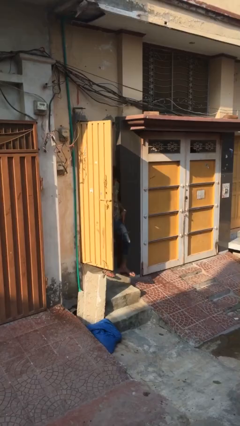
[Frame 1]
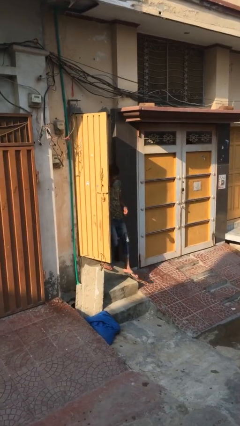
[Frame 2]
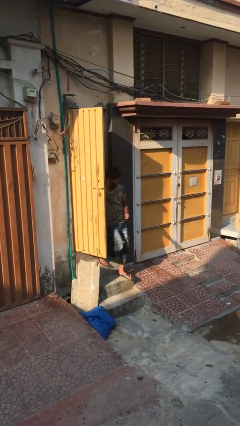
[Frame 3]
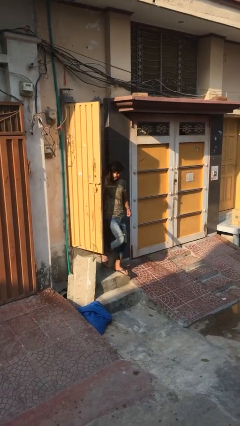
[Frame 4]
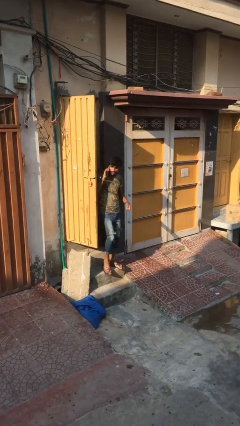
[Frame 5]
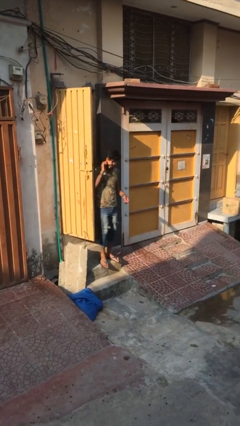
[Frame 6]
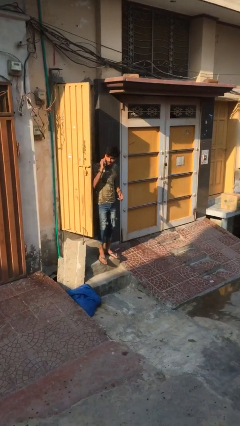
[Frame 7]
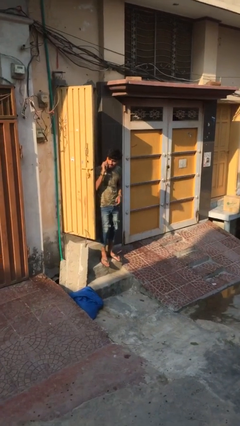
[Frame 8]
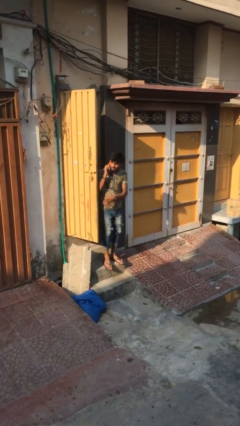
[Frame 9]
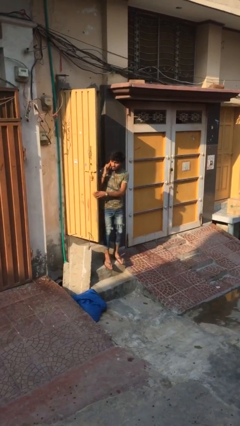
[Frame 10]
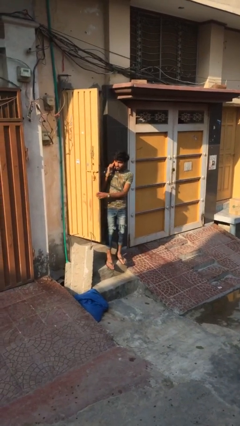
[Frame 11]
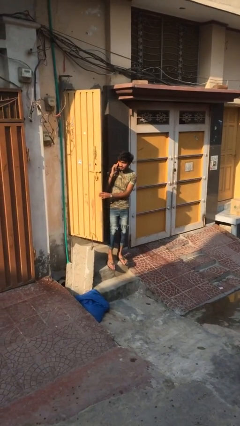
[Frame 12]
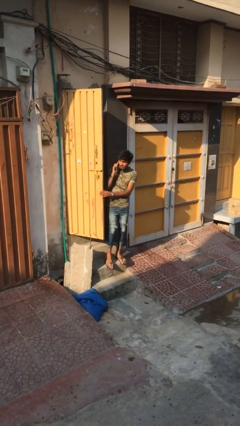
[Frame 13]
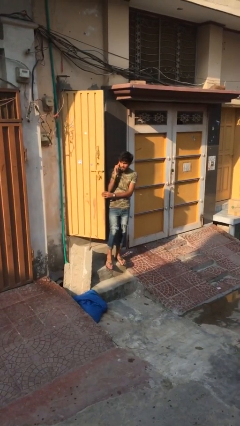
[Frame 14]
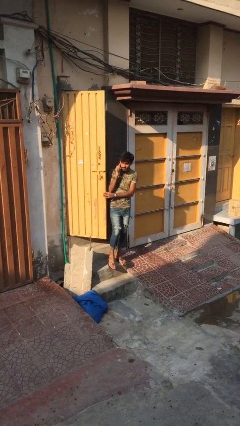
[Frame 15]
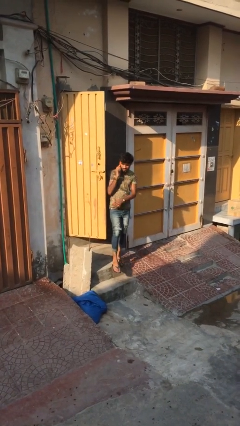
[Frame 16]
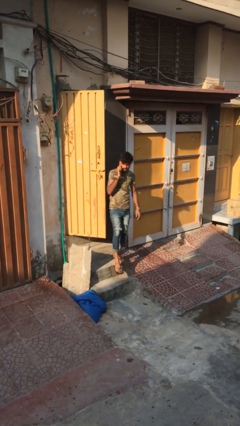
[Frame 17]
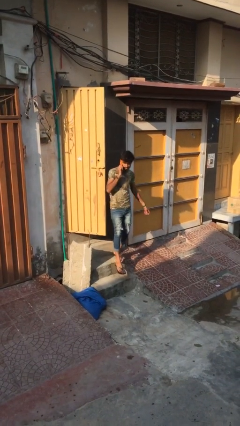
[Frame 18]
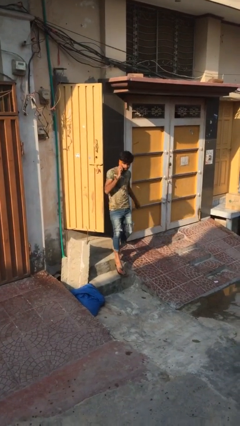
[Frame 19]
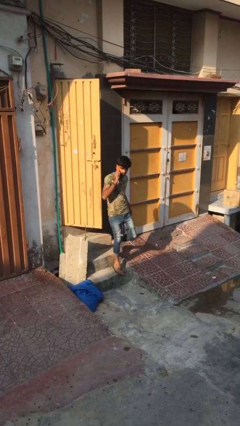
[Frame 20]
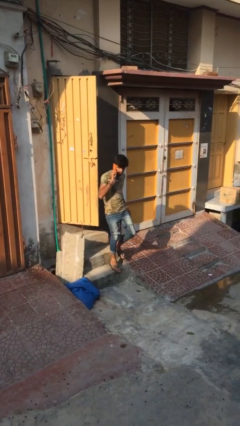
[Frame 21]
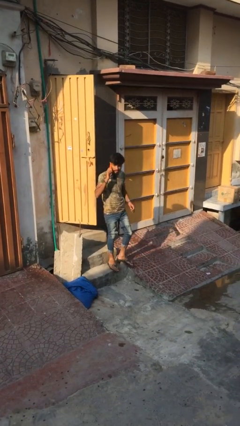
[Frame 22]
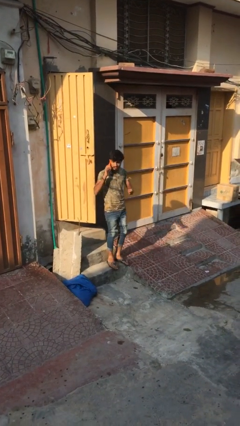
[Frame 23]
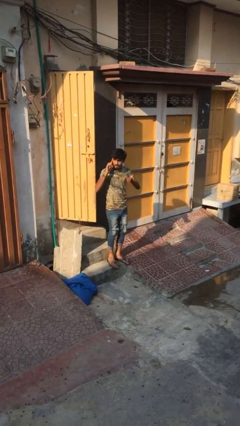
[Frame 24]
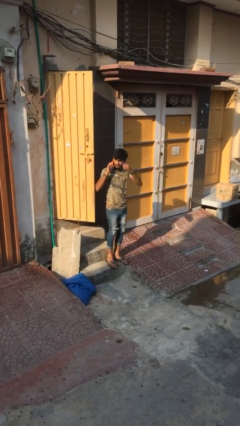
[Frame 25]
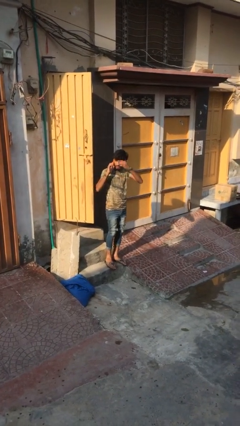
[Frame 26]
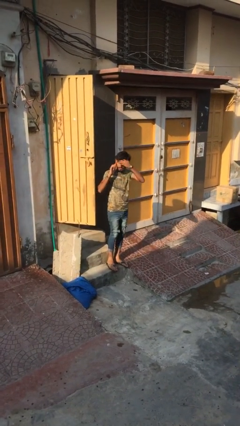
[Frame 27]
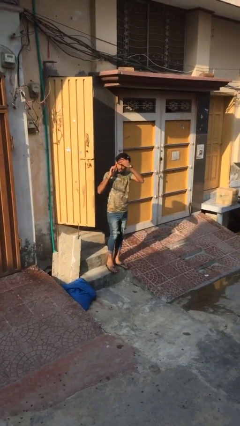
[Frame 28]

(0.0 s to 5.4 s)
person enters scene through structure

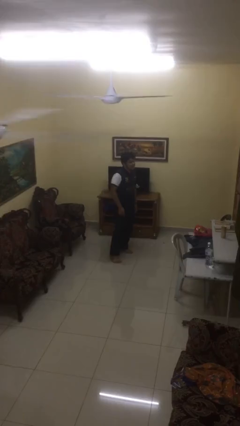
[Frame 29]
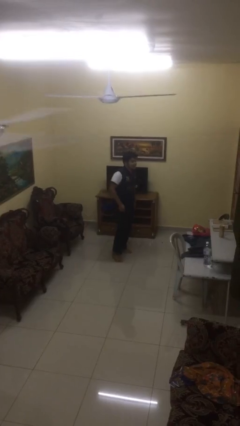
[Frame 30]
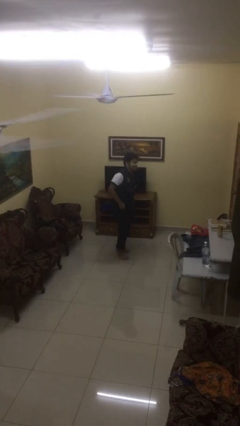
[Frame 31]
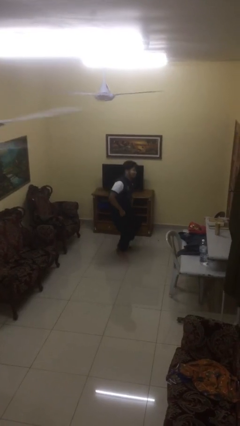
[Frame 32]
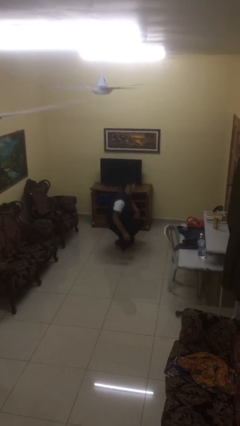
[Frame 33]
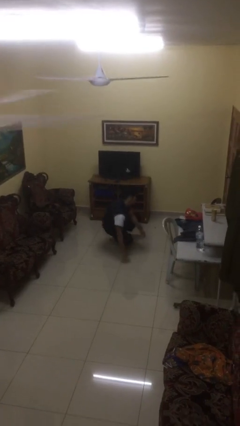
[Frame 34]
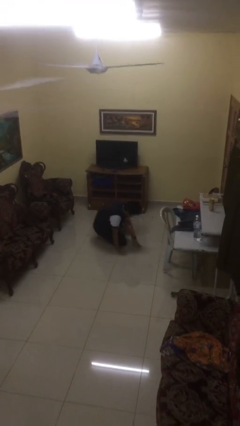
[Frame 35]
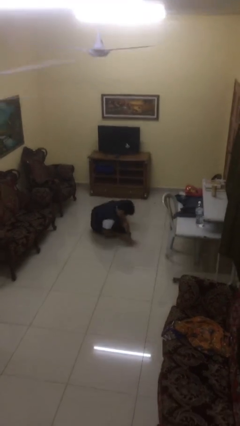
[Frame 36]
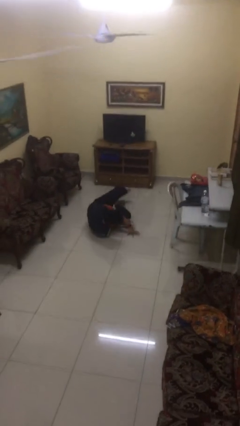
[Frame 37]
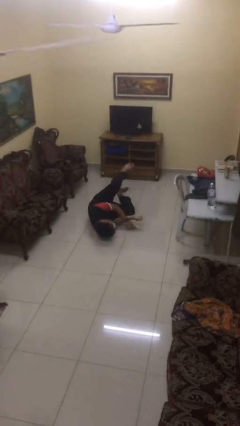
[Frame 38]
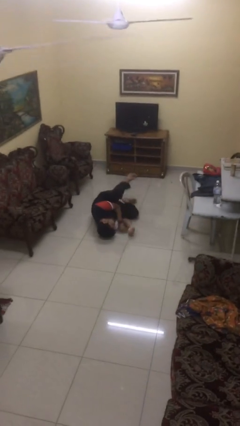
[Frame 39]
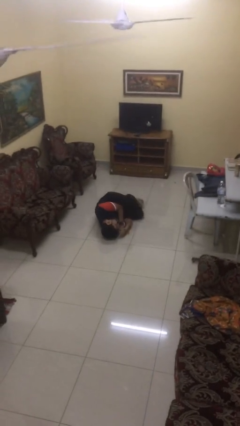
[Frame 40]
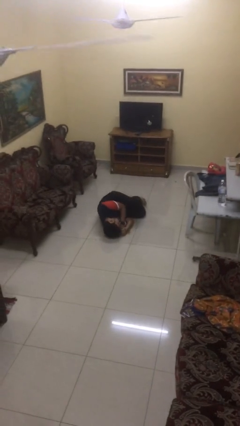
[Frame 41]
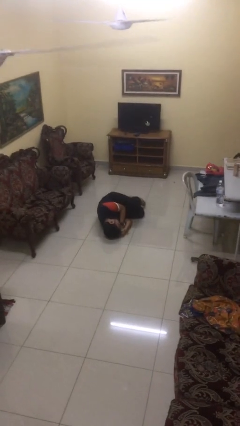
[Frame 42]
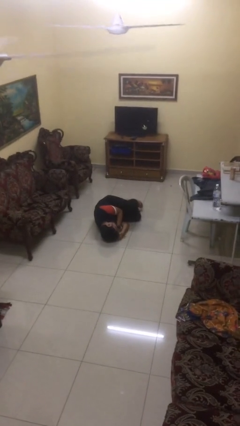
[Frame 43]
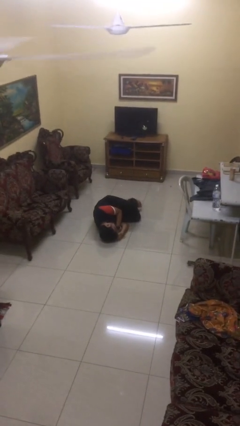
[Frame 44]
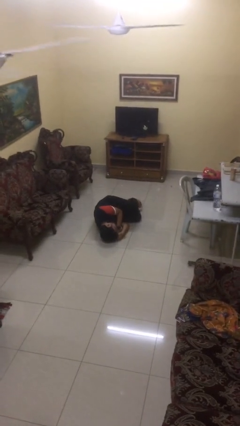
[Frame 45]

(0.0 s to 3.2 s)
person falls while standing

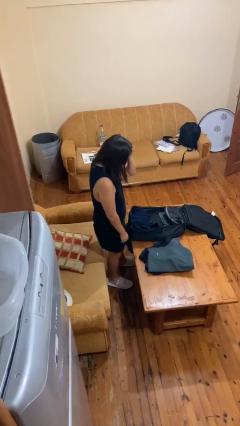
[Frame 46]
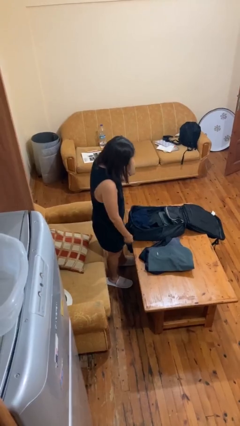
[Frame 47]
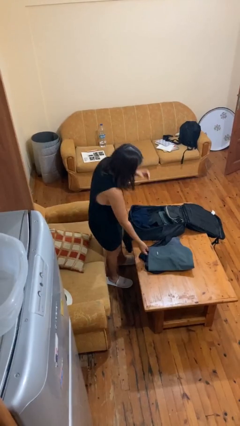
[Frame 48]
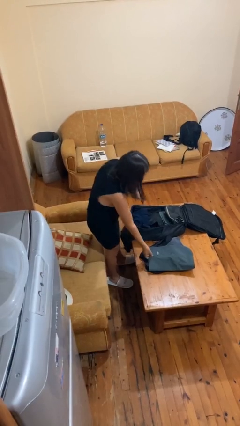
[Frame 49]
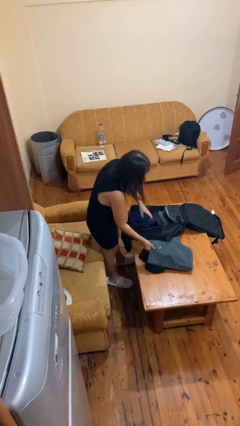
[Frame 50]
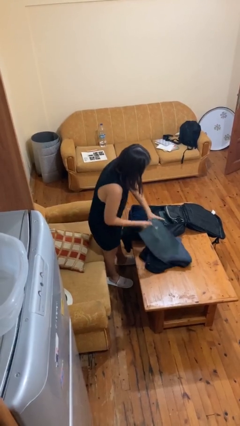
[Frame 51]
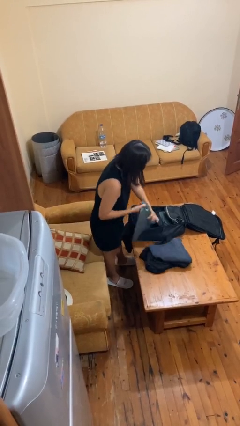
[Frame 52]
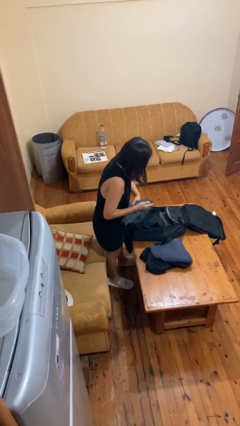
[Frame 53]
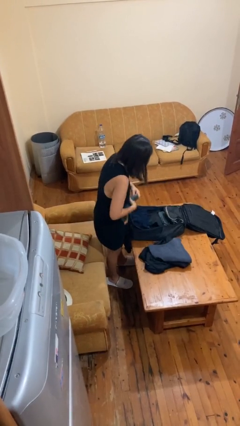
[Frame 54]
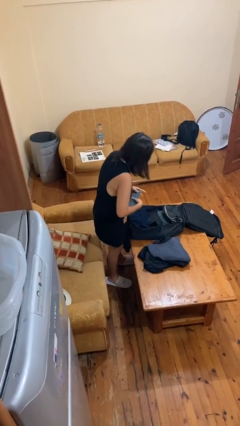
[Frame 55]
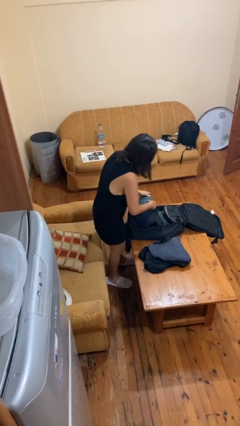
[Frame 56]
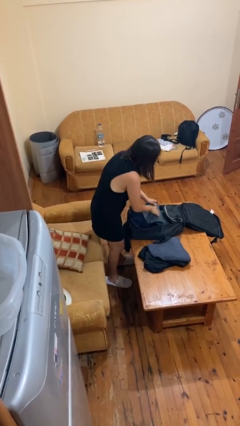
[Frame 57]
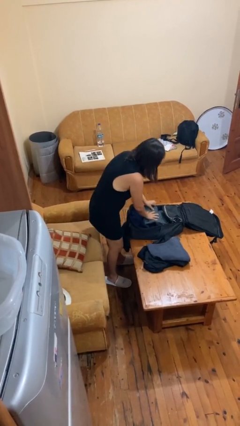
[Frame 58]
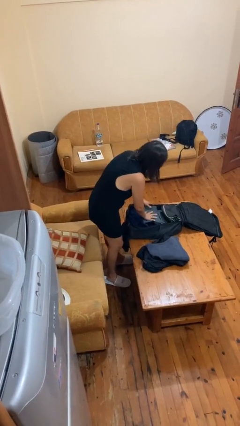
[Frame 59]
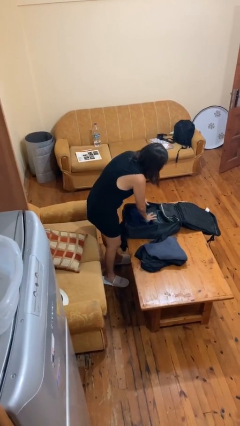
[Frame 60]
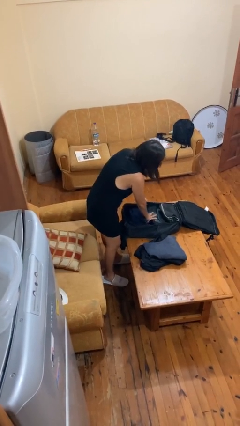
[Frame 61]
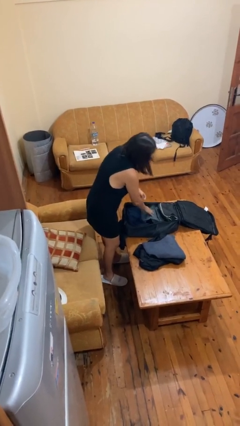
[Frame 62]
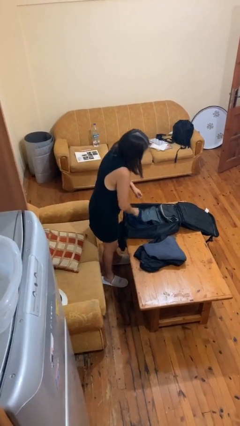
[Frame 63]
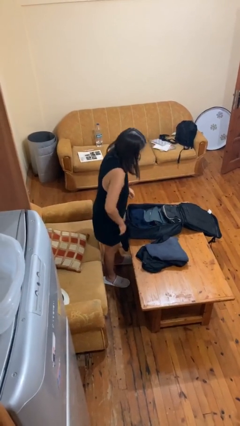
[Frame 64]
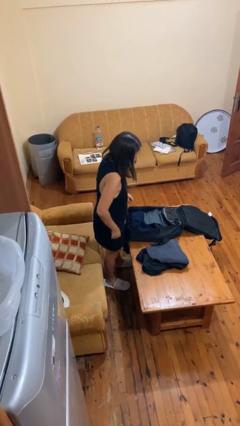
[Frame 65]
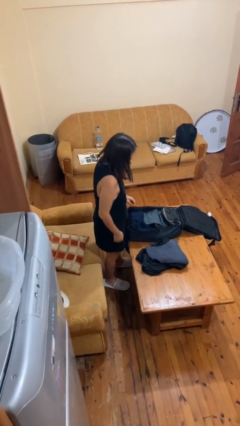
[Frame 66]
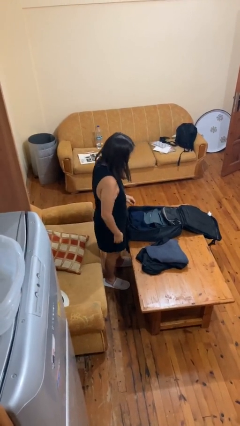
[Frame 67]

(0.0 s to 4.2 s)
person loads clothes into suitcase

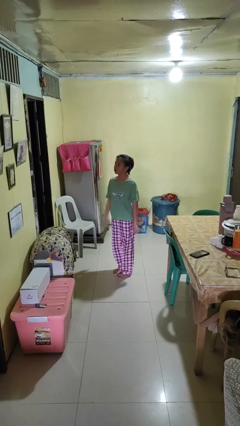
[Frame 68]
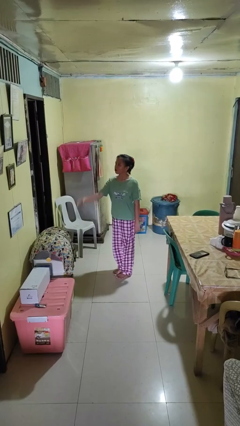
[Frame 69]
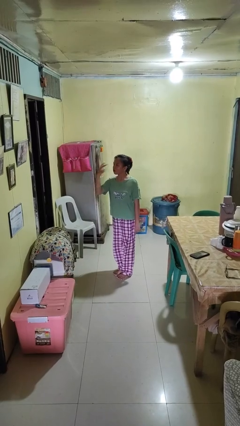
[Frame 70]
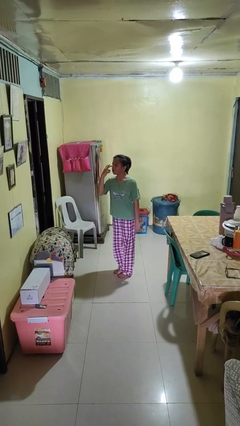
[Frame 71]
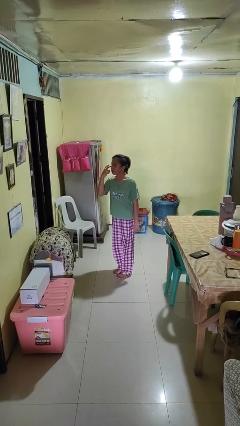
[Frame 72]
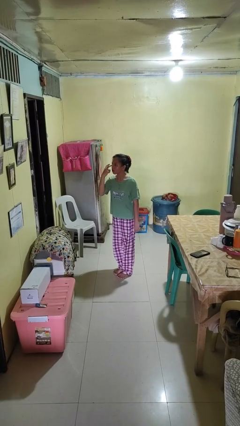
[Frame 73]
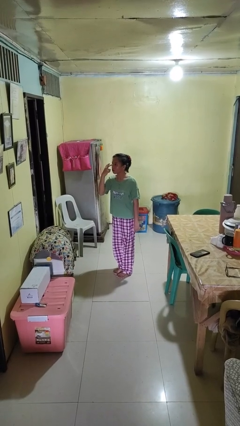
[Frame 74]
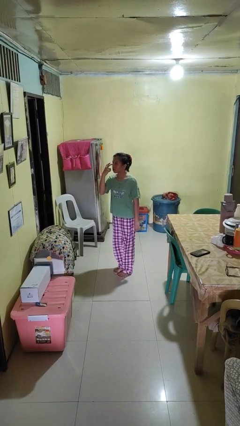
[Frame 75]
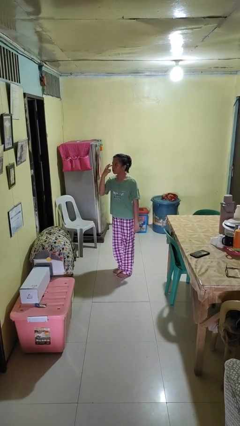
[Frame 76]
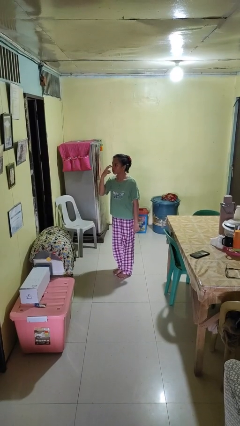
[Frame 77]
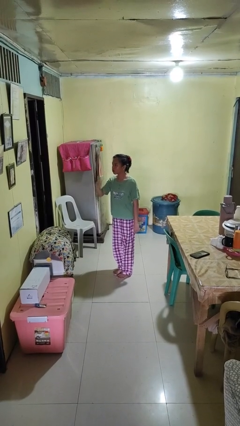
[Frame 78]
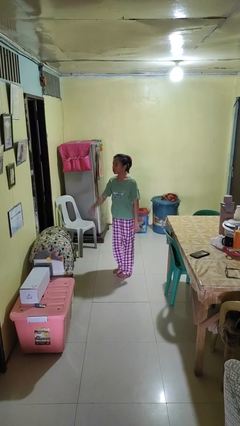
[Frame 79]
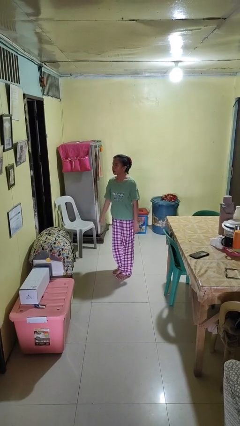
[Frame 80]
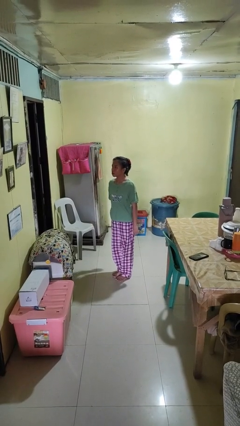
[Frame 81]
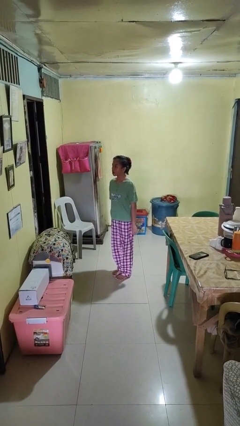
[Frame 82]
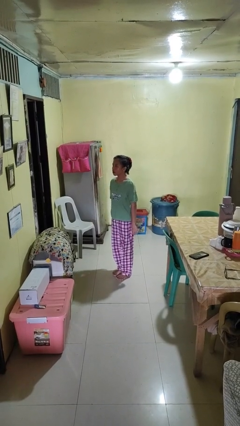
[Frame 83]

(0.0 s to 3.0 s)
person gestures watch closely

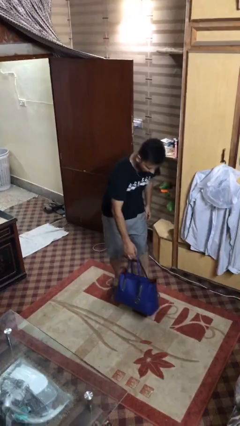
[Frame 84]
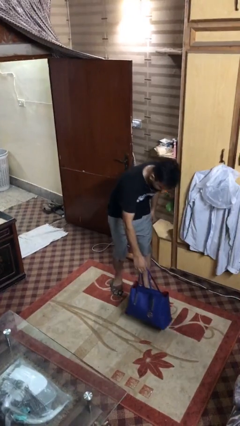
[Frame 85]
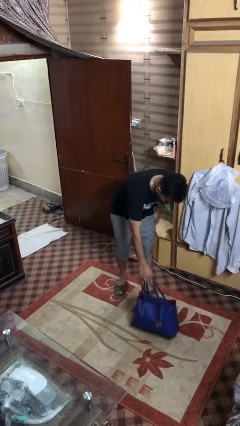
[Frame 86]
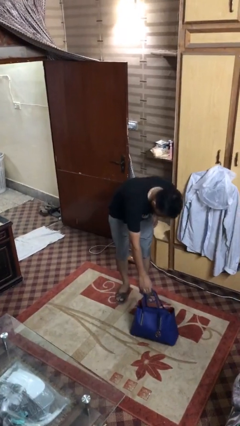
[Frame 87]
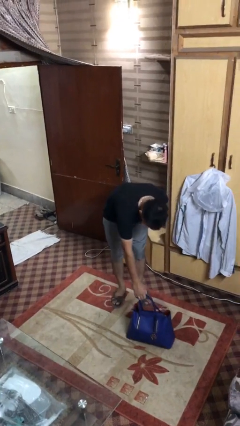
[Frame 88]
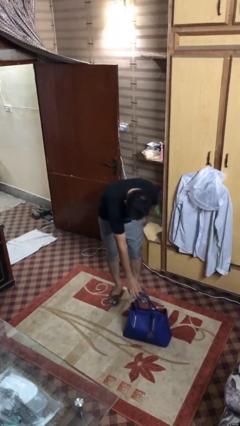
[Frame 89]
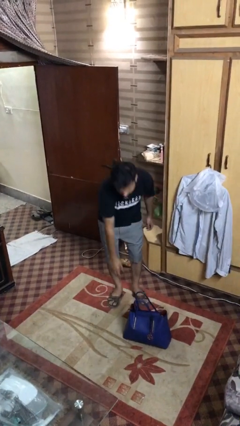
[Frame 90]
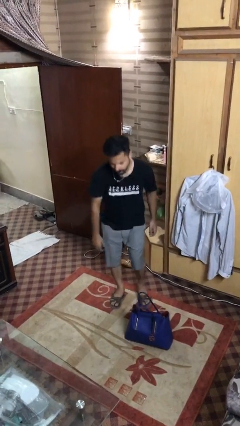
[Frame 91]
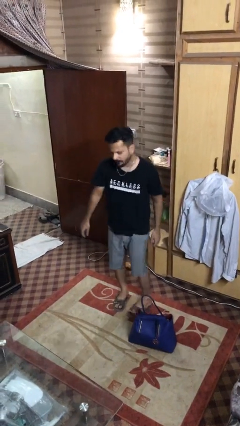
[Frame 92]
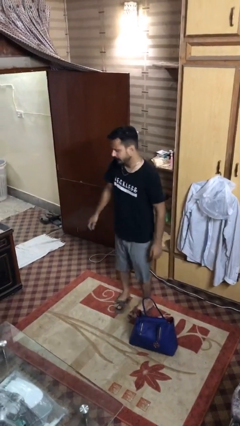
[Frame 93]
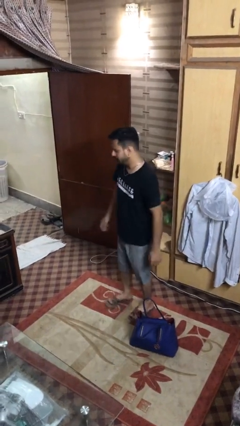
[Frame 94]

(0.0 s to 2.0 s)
person puts down object on floor
